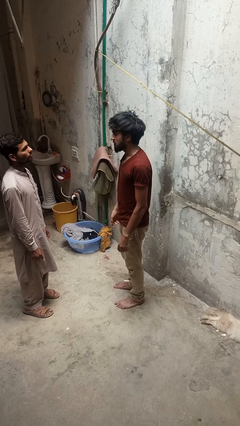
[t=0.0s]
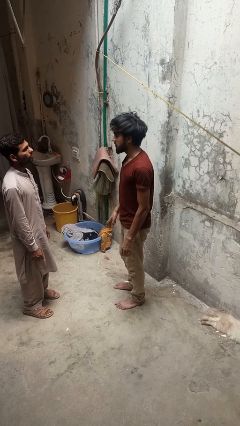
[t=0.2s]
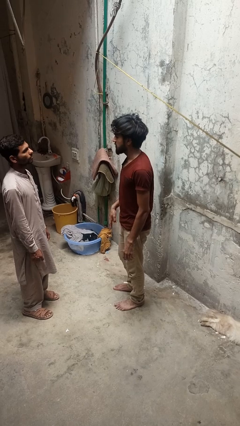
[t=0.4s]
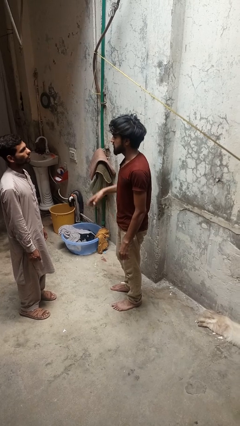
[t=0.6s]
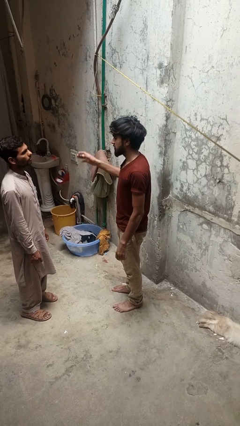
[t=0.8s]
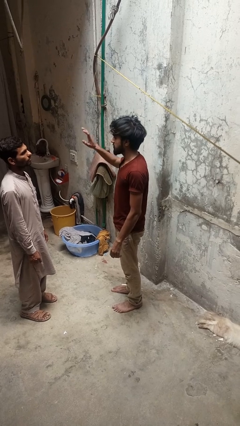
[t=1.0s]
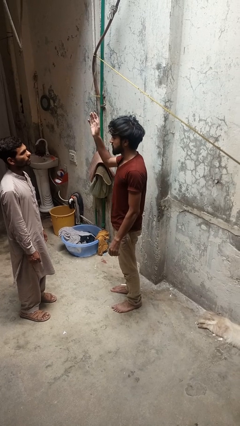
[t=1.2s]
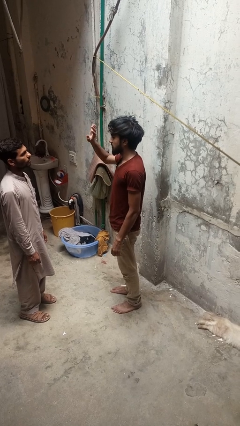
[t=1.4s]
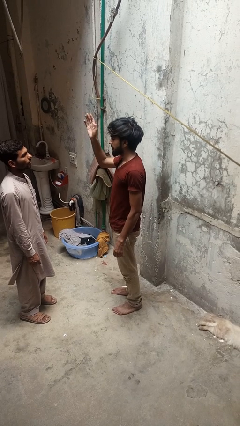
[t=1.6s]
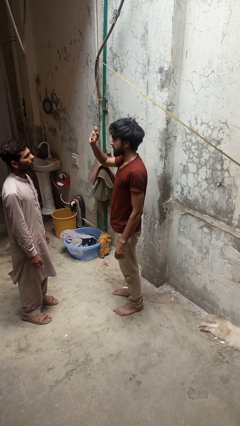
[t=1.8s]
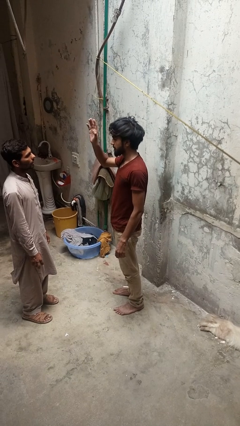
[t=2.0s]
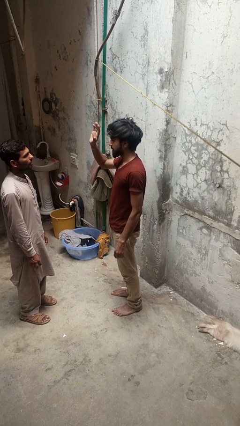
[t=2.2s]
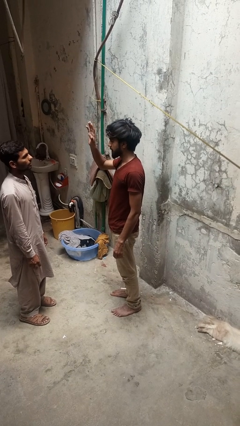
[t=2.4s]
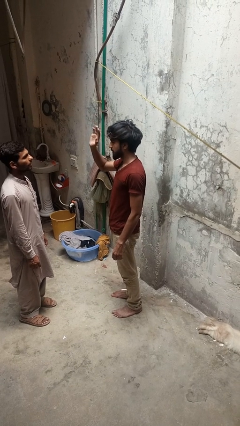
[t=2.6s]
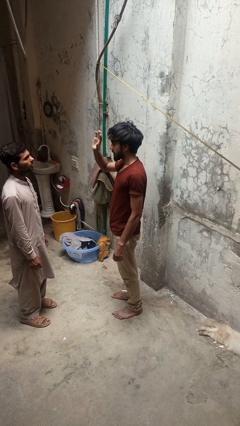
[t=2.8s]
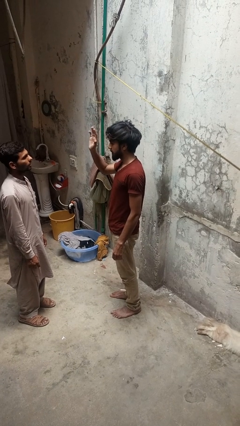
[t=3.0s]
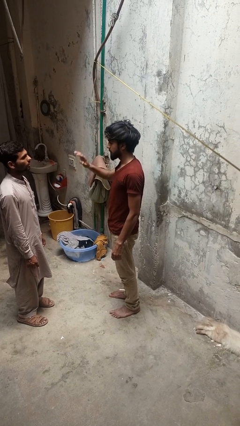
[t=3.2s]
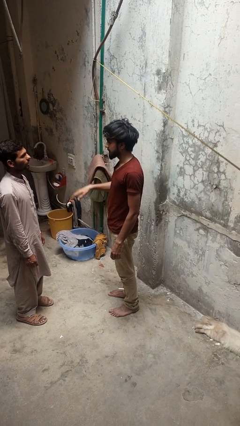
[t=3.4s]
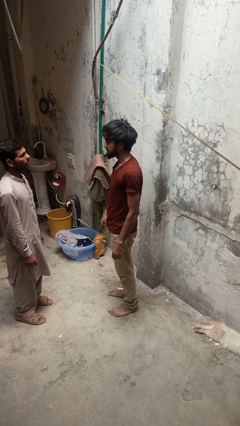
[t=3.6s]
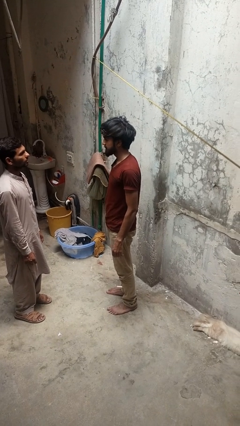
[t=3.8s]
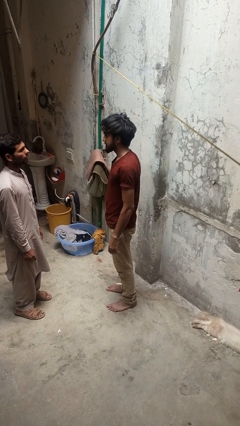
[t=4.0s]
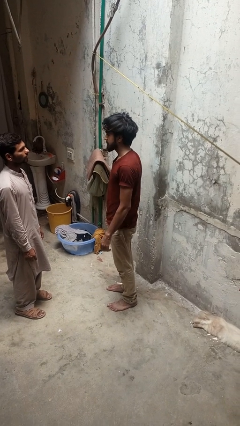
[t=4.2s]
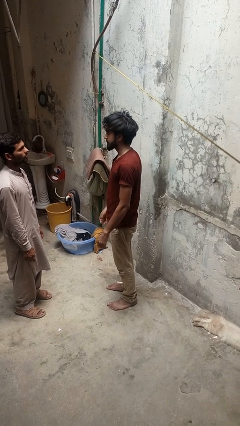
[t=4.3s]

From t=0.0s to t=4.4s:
person waves at person

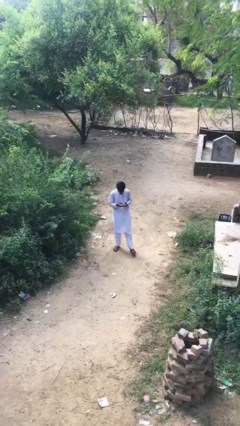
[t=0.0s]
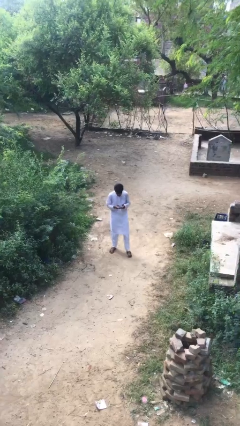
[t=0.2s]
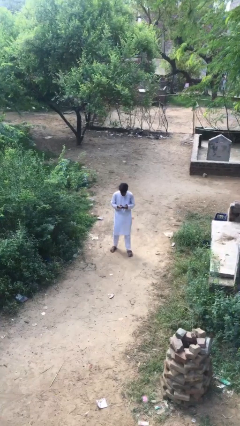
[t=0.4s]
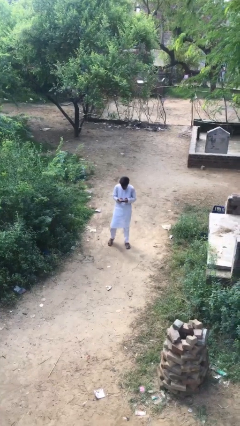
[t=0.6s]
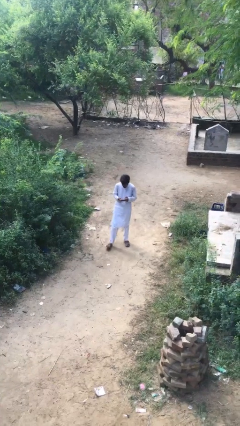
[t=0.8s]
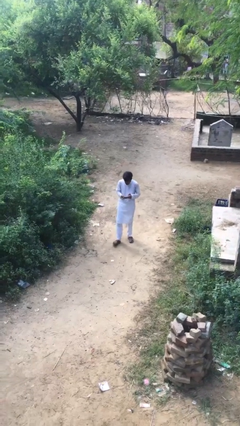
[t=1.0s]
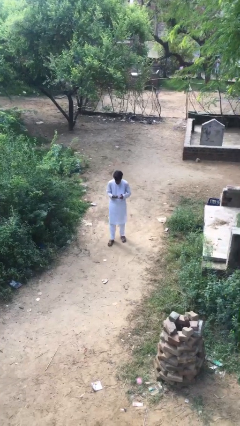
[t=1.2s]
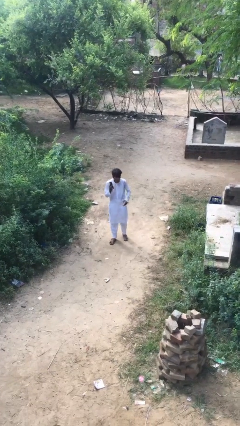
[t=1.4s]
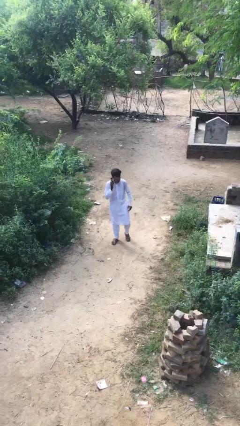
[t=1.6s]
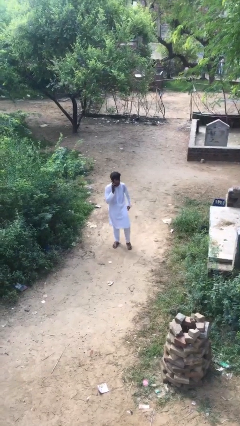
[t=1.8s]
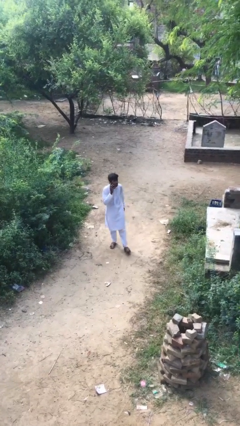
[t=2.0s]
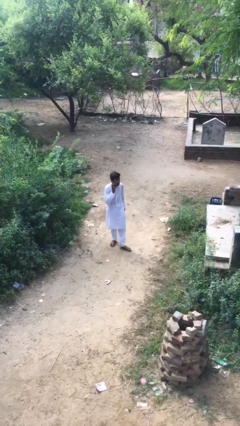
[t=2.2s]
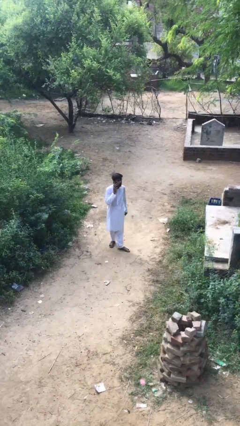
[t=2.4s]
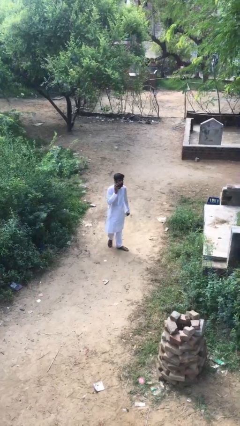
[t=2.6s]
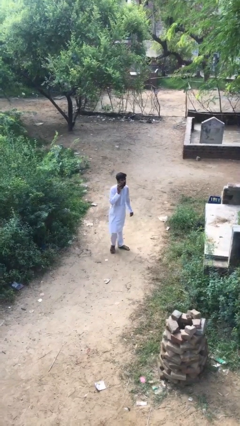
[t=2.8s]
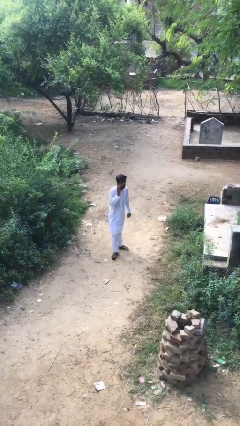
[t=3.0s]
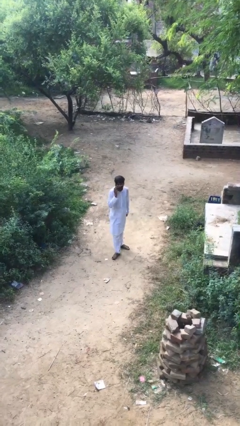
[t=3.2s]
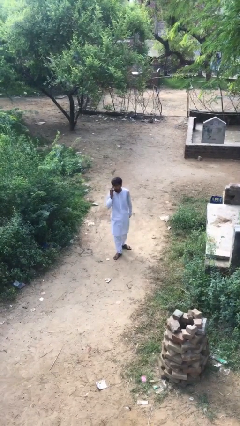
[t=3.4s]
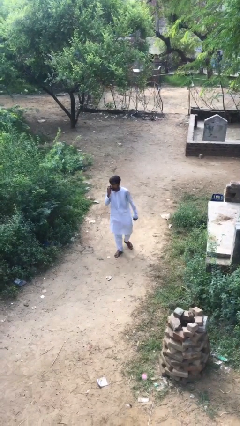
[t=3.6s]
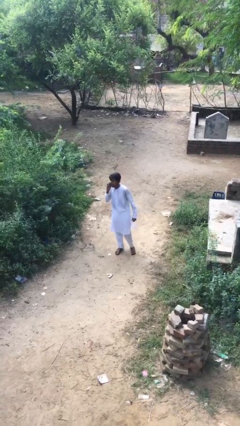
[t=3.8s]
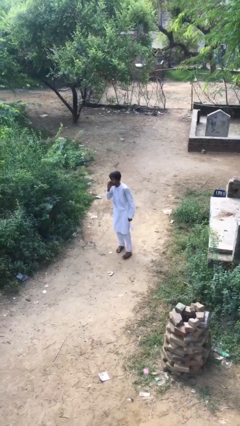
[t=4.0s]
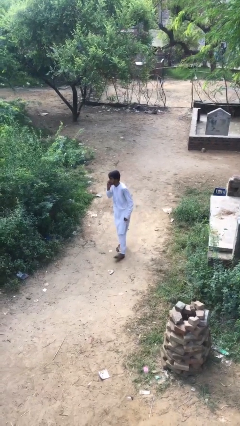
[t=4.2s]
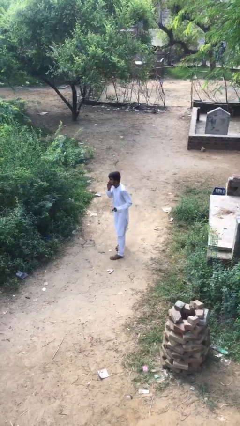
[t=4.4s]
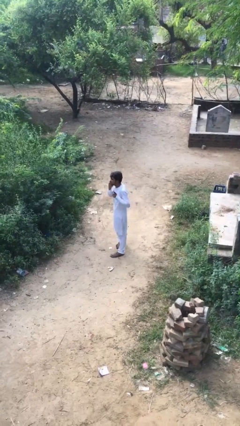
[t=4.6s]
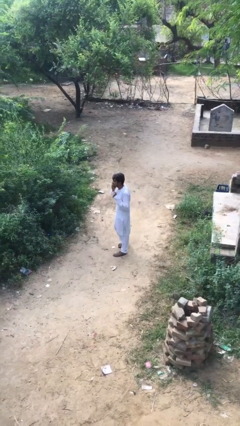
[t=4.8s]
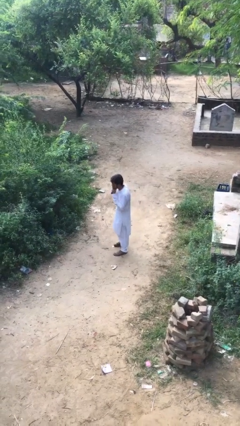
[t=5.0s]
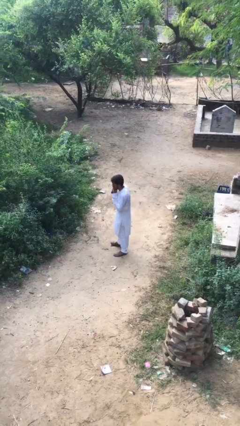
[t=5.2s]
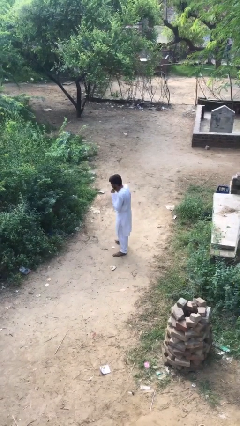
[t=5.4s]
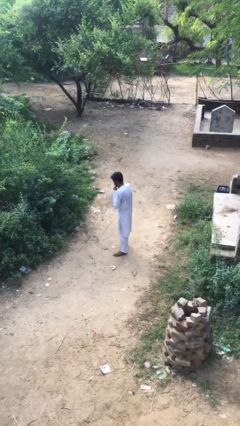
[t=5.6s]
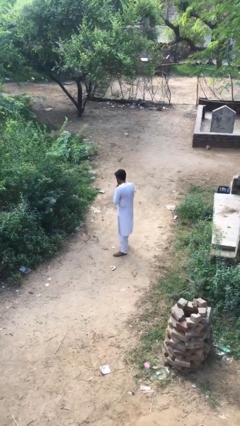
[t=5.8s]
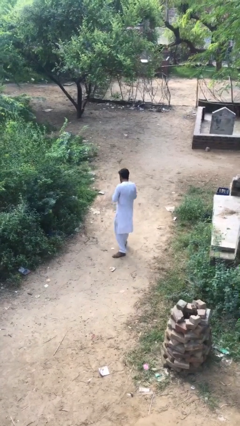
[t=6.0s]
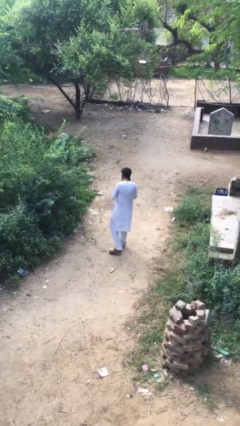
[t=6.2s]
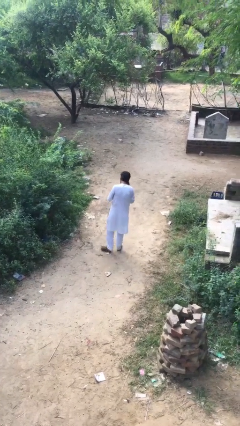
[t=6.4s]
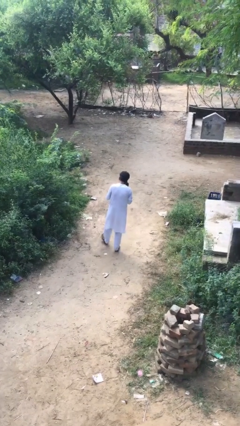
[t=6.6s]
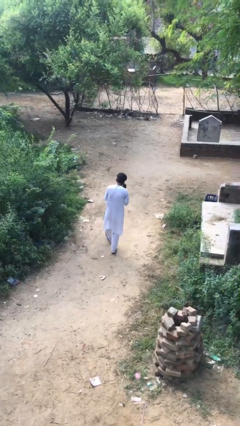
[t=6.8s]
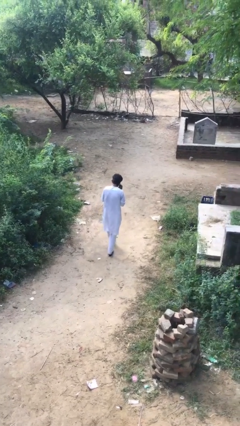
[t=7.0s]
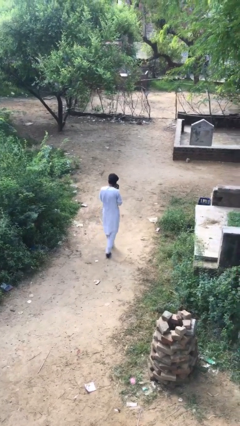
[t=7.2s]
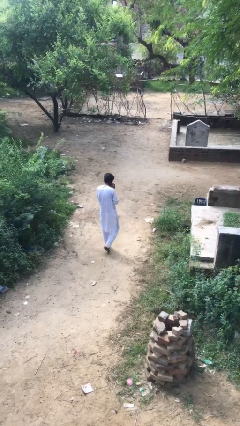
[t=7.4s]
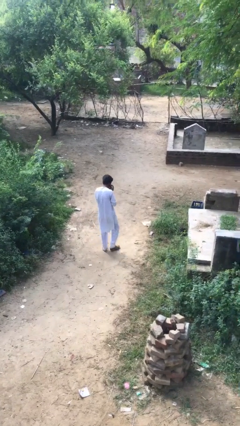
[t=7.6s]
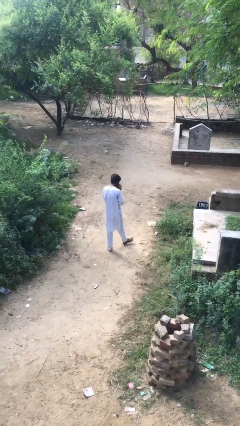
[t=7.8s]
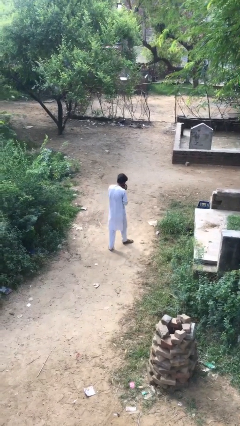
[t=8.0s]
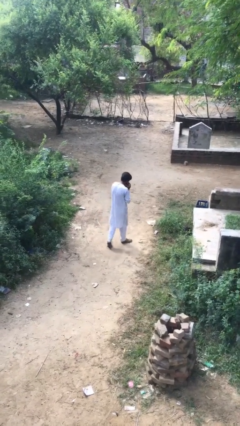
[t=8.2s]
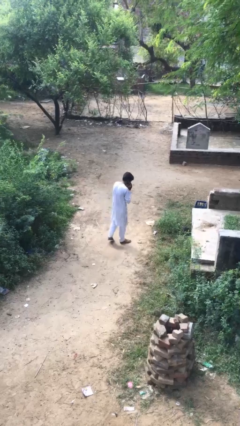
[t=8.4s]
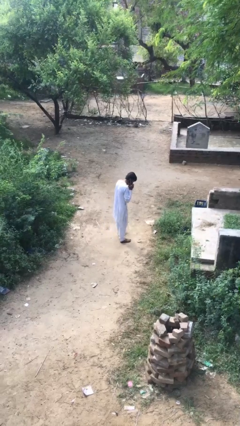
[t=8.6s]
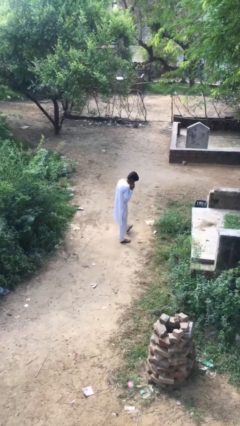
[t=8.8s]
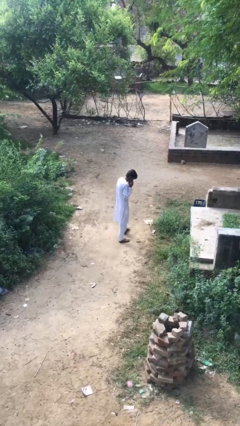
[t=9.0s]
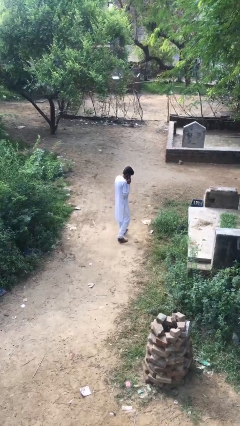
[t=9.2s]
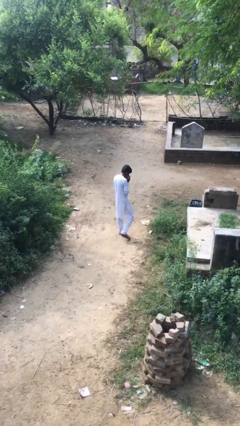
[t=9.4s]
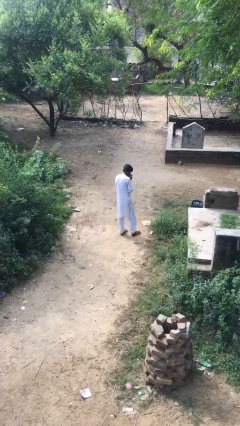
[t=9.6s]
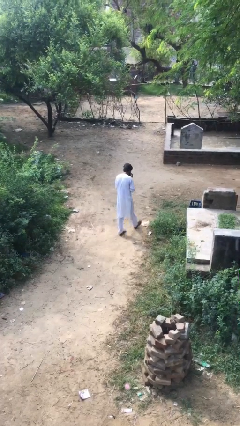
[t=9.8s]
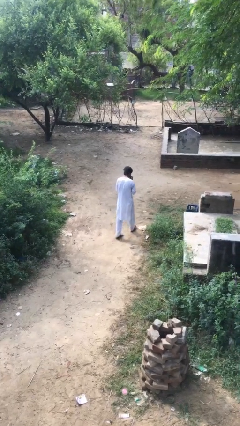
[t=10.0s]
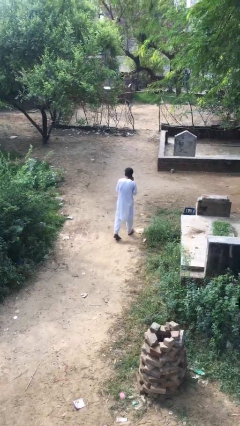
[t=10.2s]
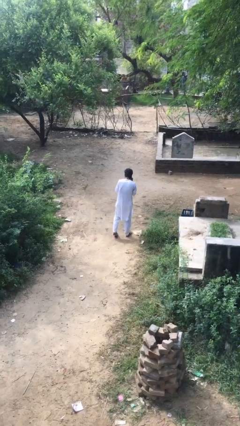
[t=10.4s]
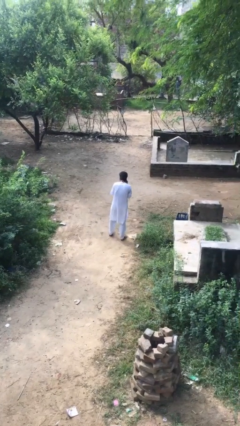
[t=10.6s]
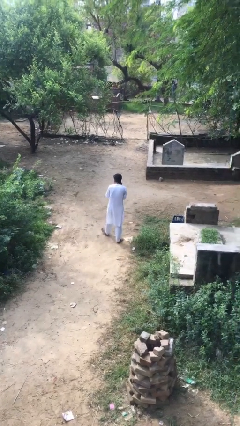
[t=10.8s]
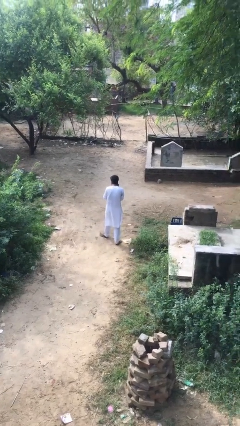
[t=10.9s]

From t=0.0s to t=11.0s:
person talks on phone

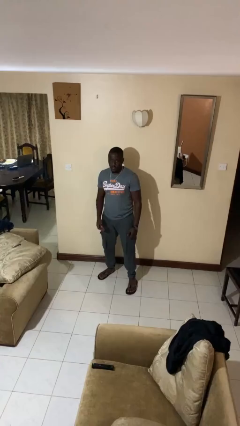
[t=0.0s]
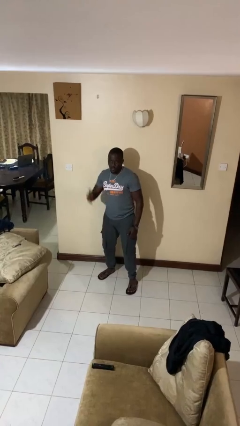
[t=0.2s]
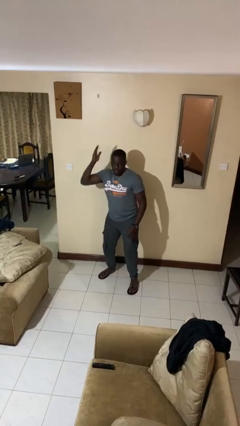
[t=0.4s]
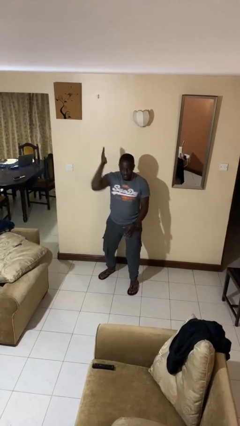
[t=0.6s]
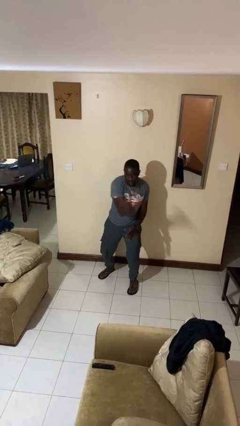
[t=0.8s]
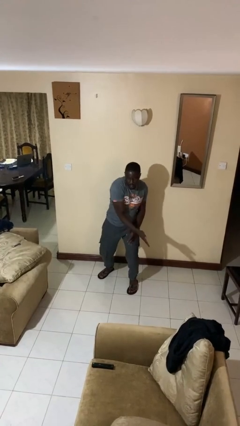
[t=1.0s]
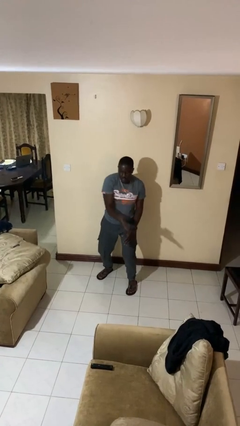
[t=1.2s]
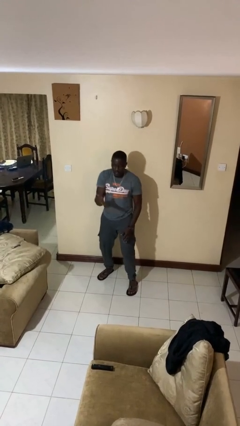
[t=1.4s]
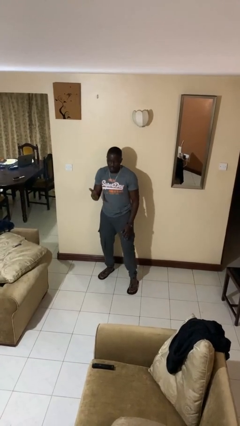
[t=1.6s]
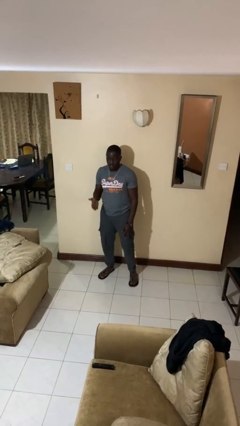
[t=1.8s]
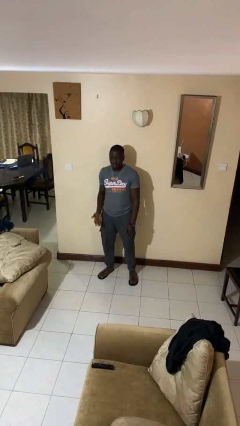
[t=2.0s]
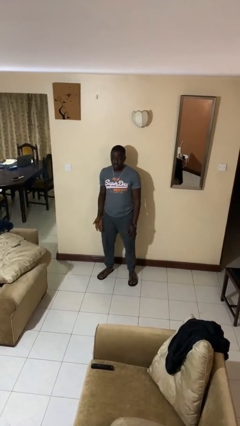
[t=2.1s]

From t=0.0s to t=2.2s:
person karate chop
